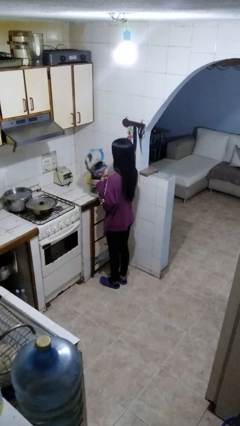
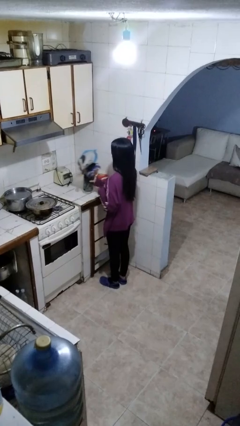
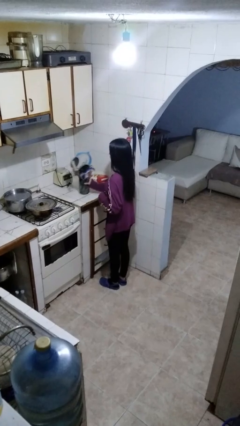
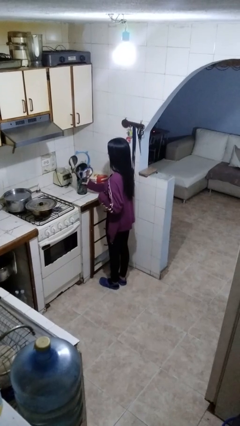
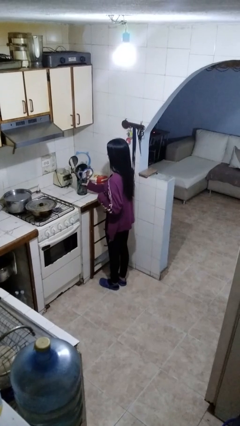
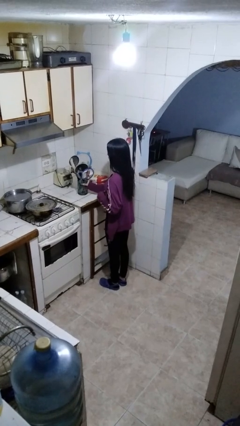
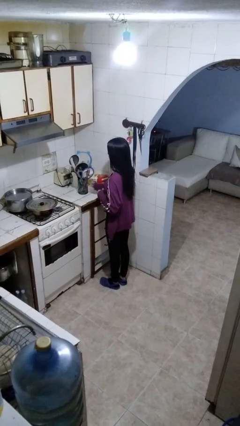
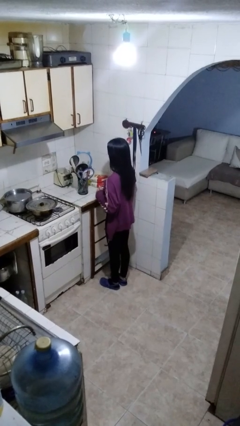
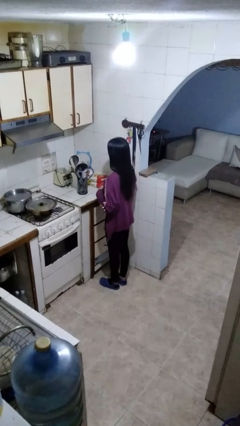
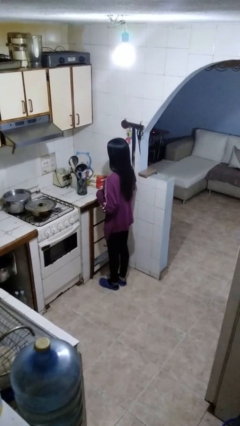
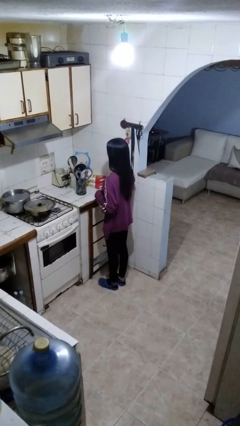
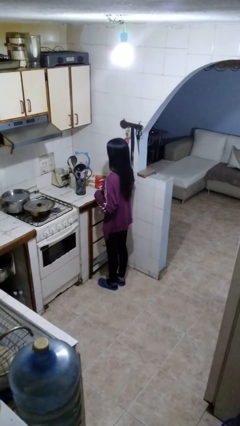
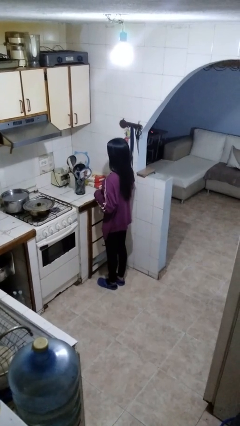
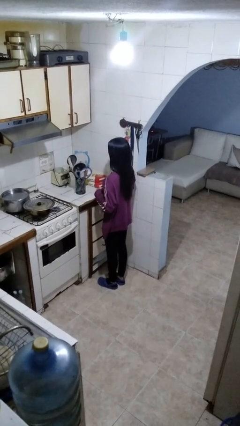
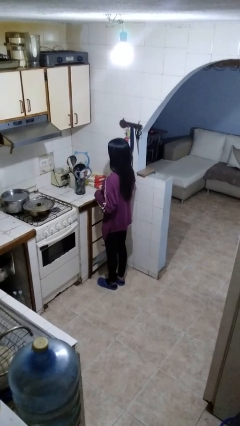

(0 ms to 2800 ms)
person picks up object from countertop

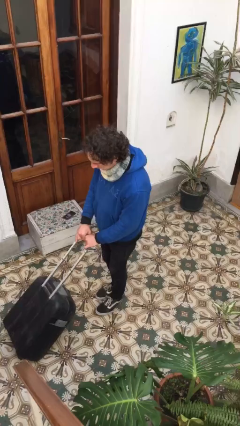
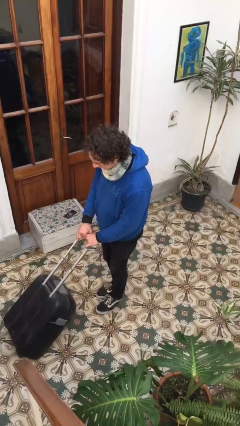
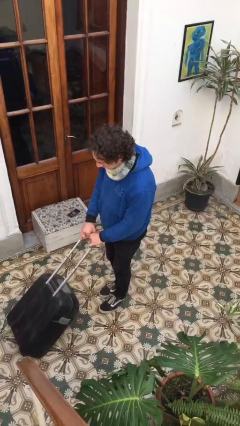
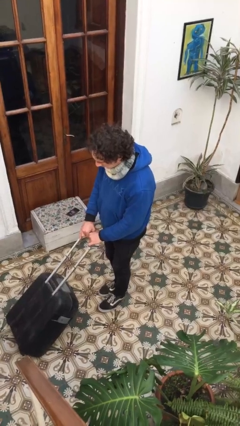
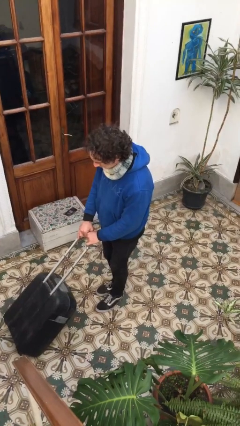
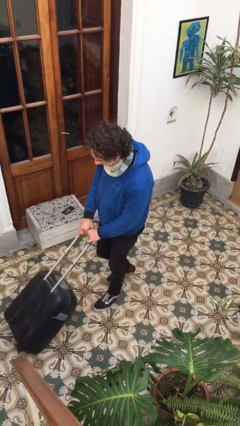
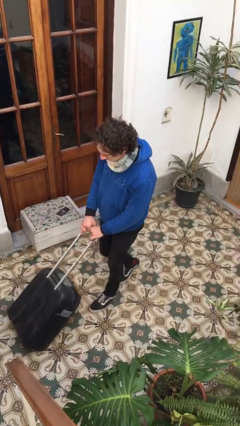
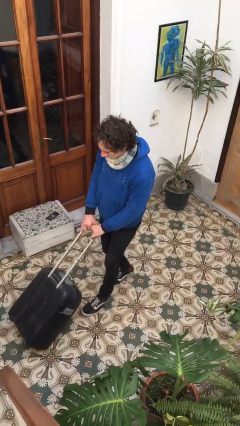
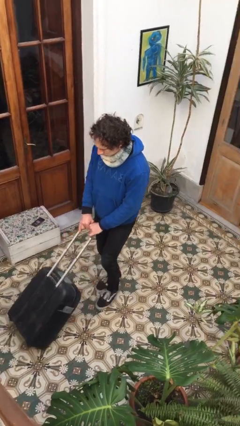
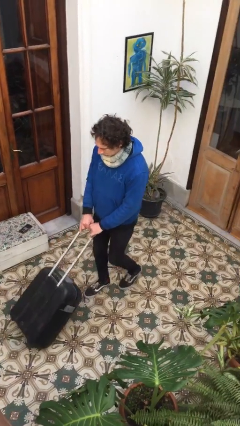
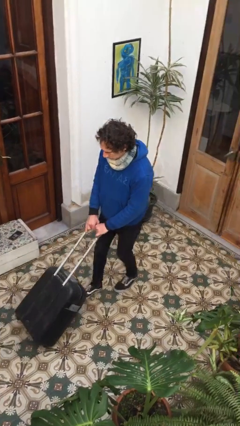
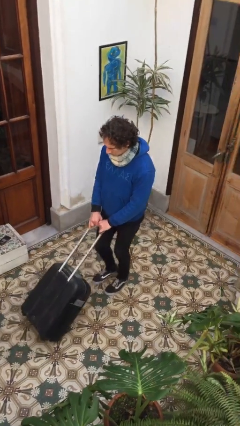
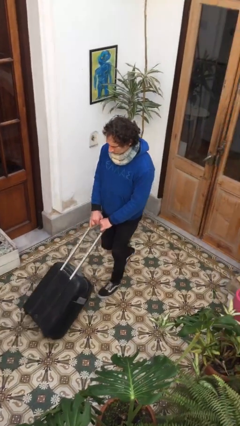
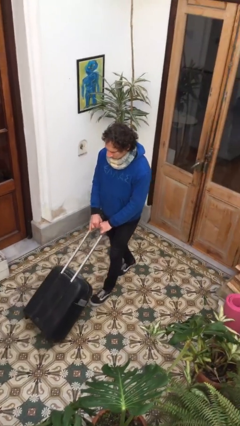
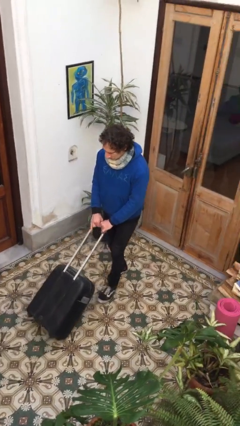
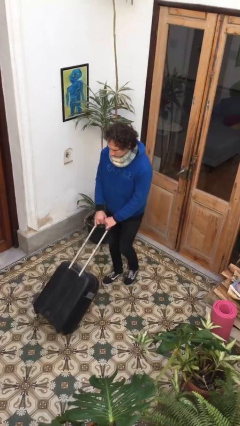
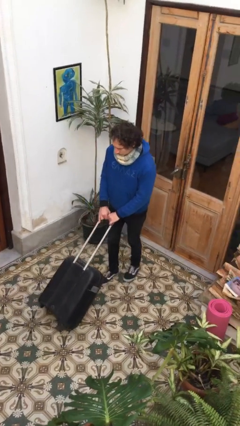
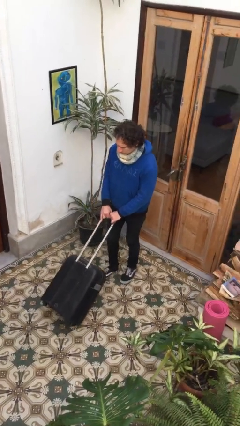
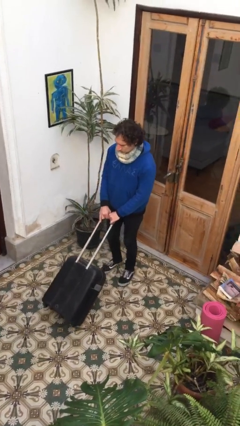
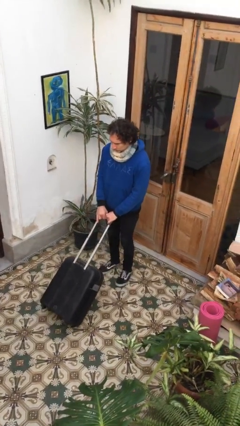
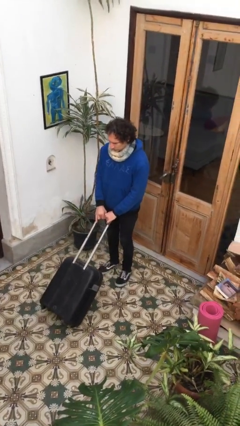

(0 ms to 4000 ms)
person pulls wheeled cart

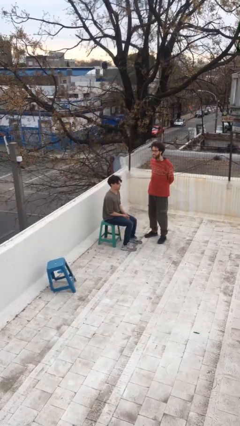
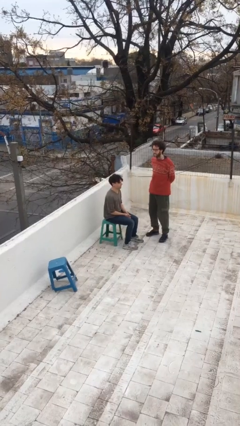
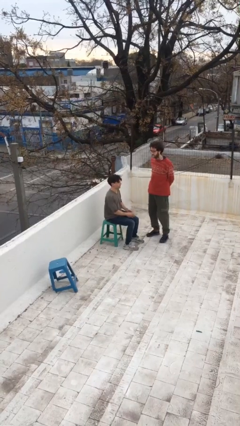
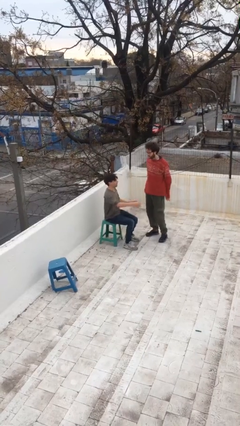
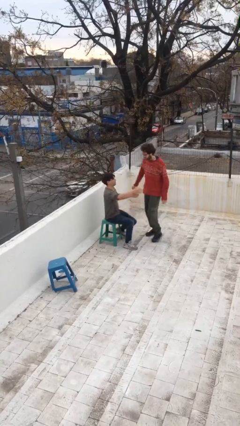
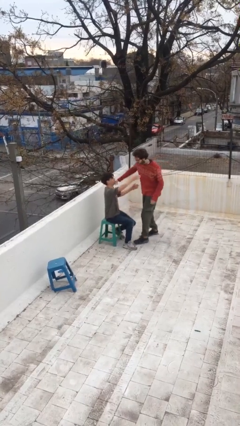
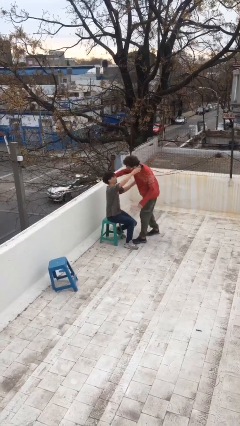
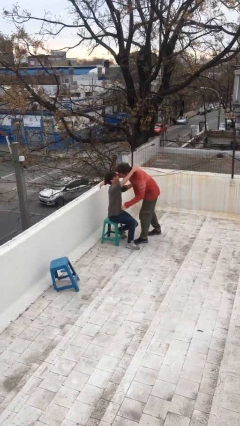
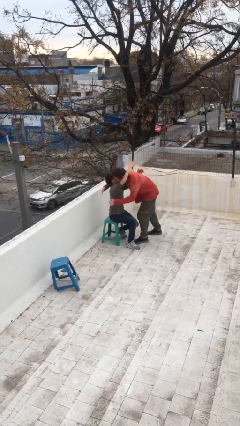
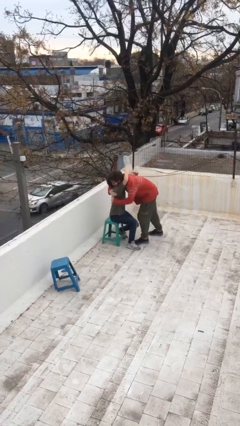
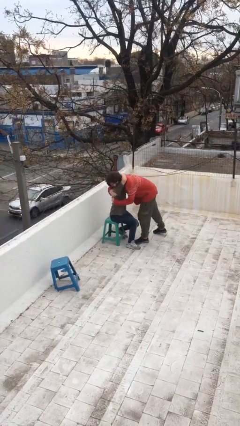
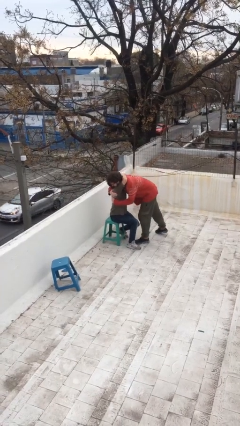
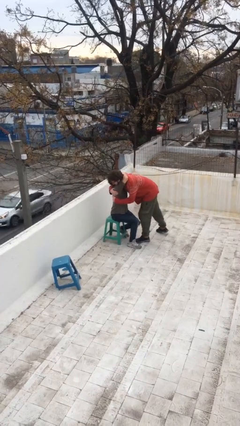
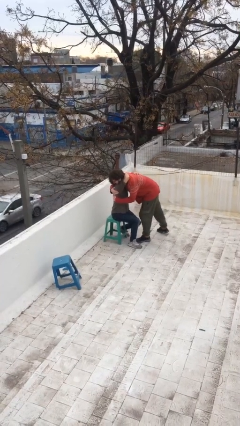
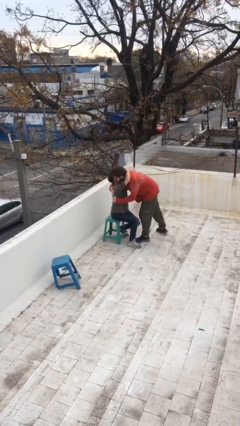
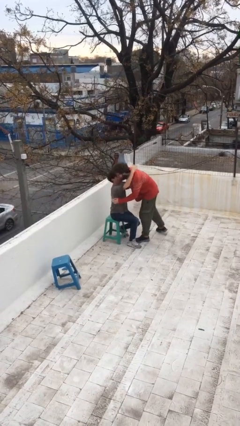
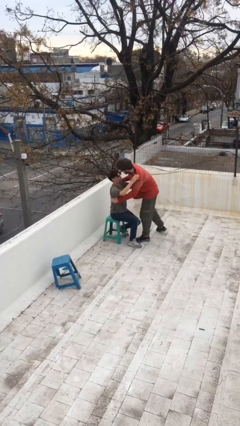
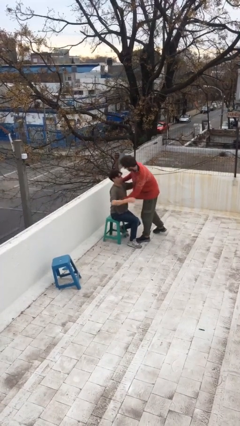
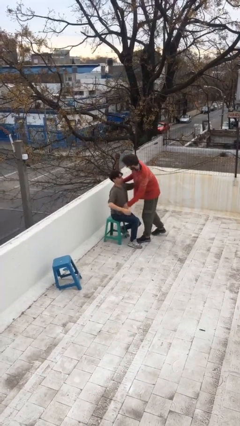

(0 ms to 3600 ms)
person embraces person

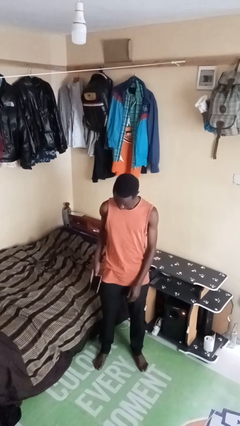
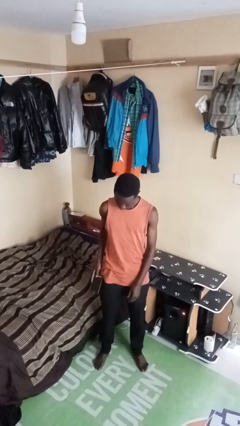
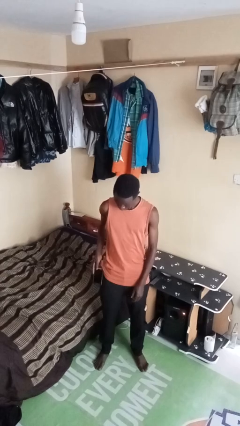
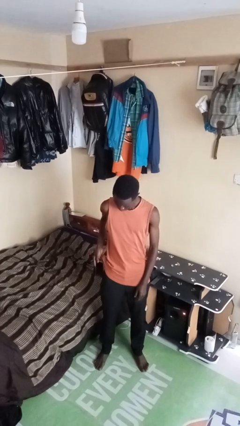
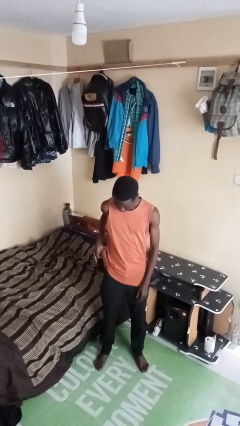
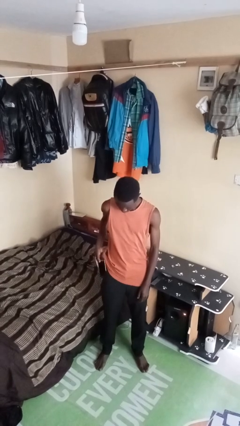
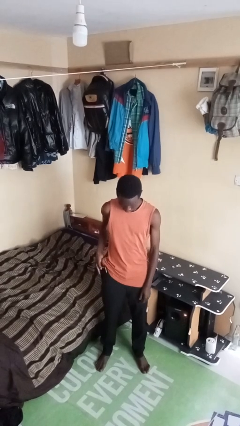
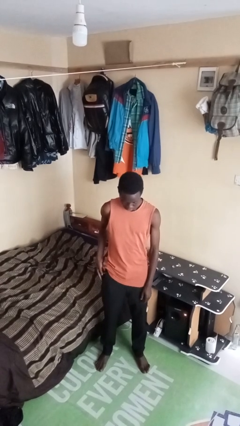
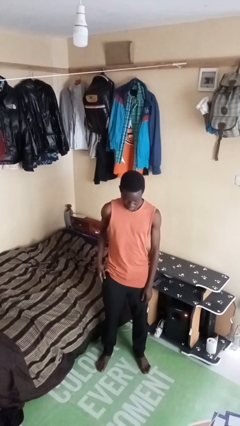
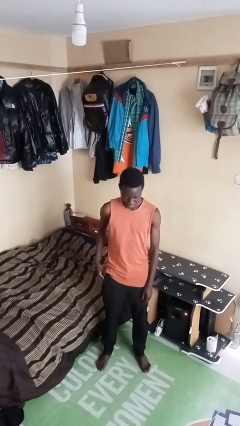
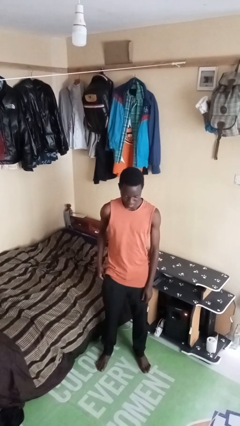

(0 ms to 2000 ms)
person puts phone into pocket

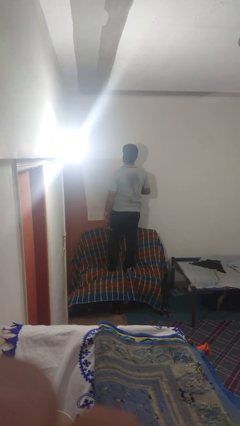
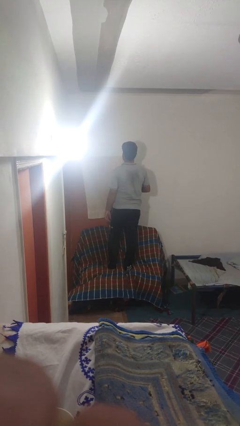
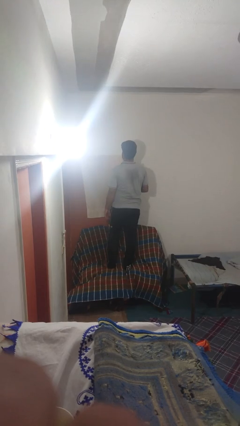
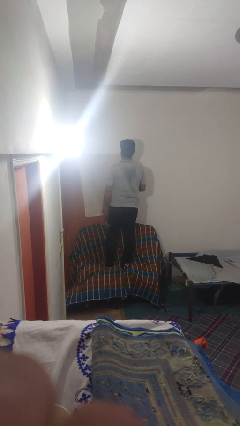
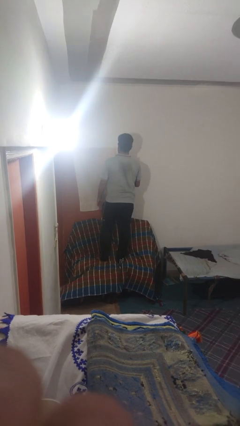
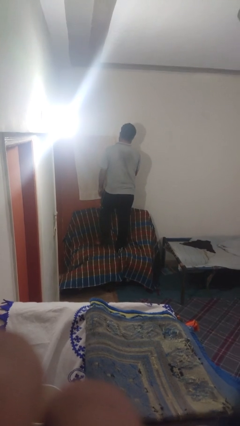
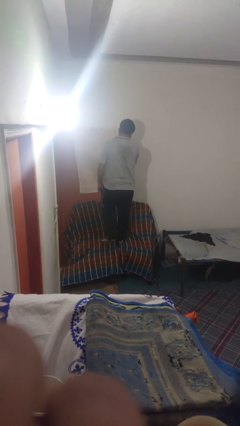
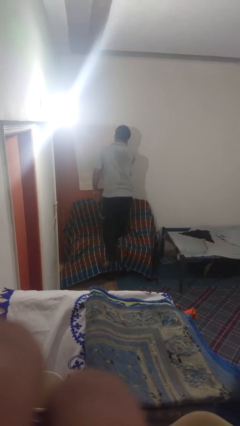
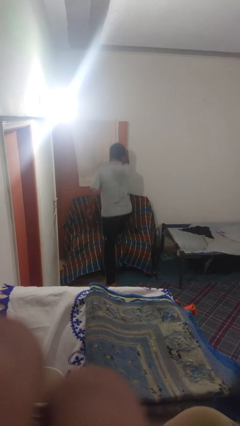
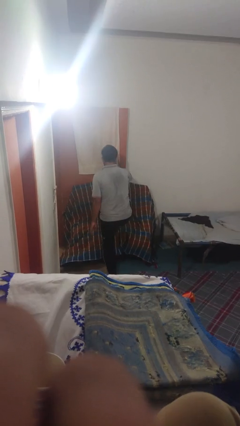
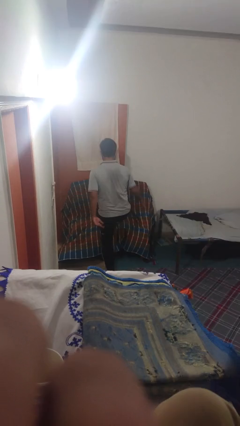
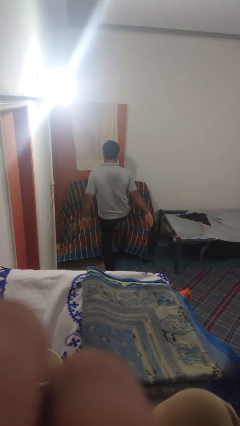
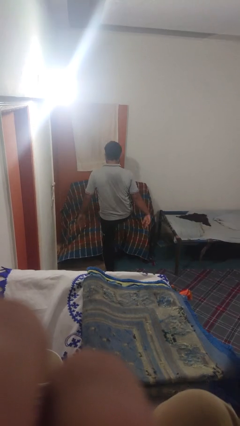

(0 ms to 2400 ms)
person climbs off couch

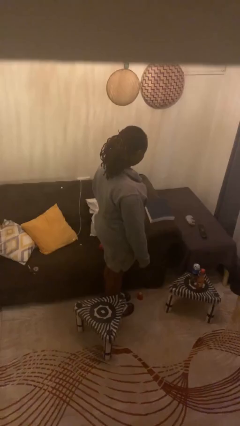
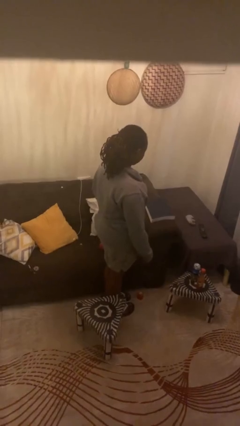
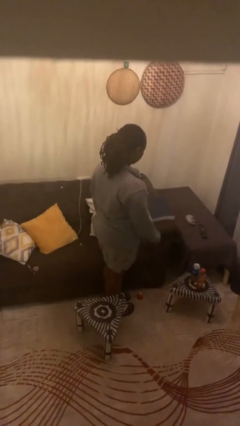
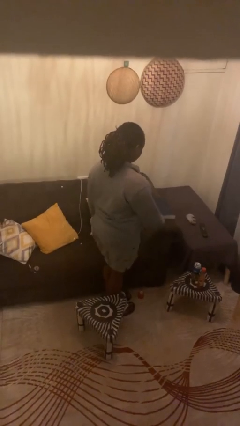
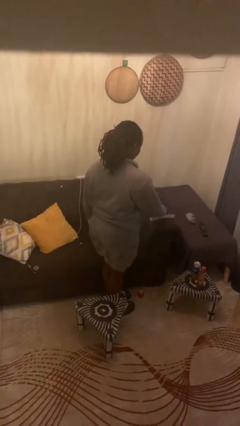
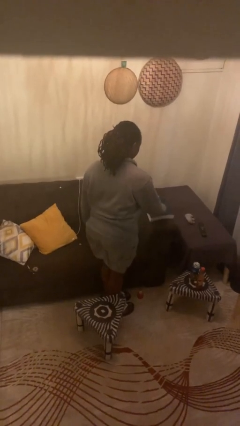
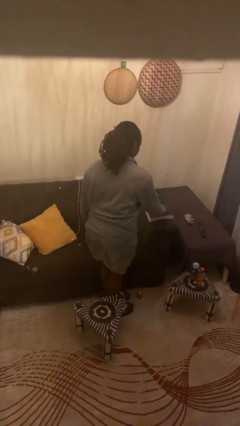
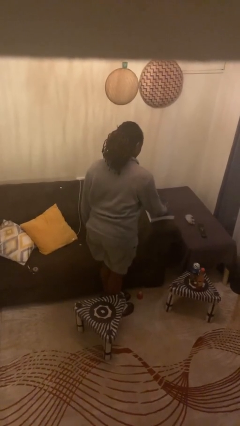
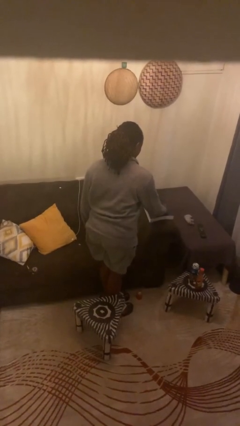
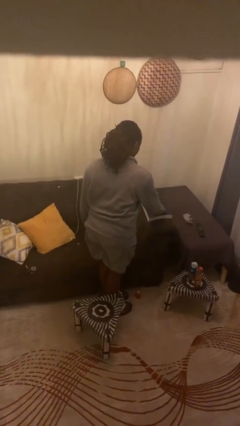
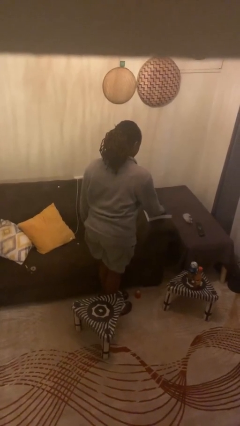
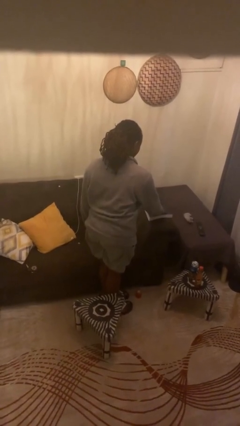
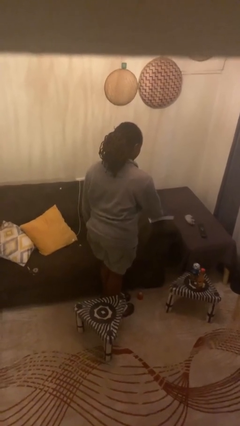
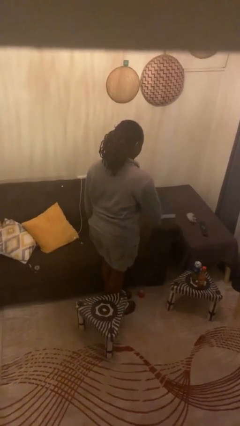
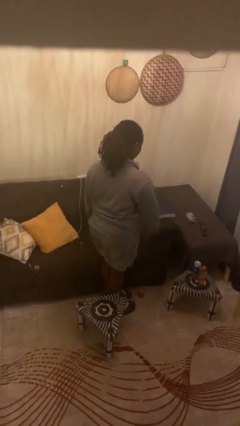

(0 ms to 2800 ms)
person taps object with finger
